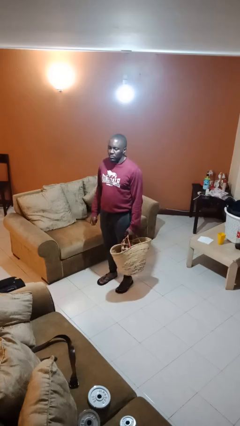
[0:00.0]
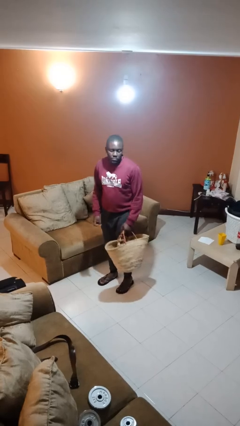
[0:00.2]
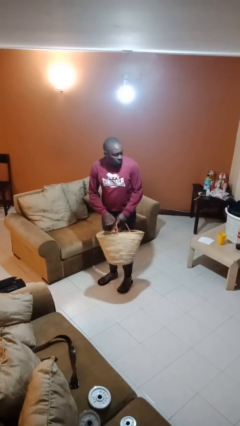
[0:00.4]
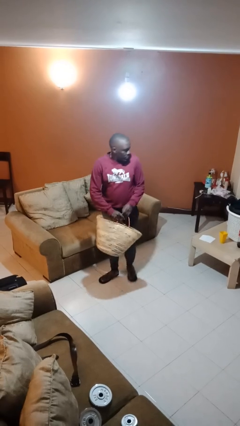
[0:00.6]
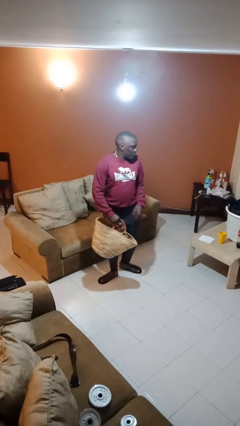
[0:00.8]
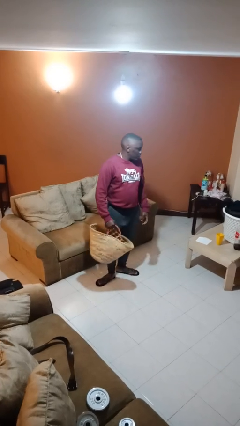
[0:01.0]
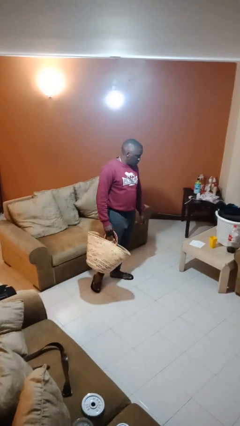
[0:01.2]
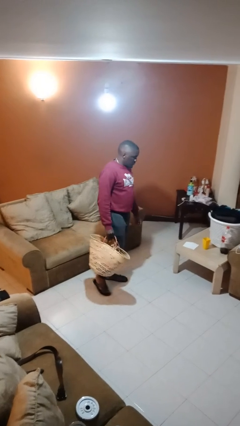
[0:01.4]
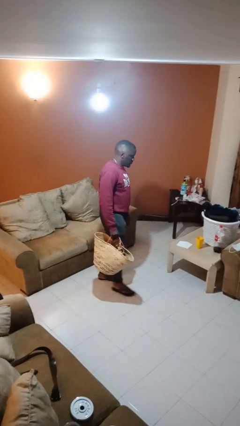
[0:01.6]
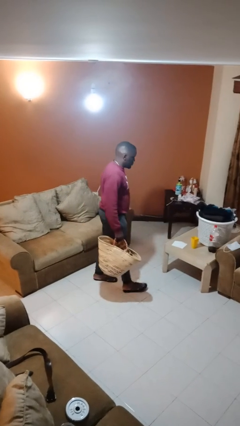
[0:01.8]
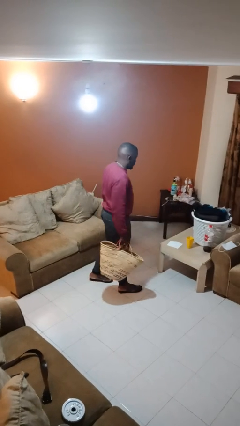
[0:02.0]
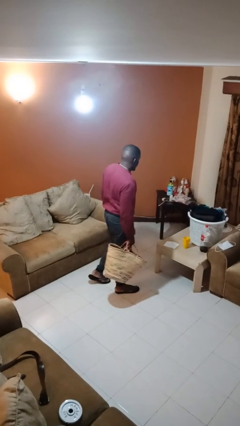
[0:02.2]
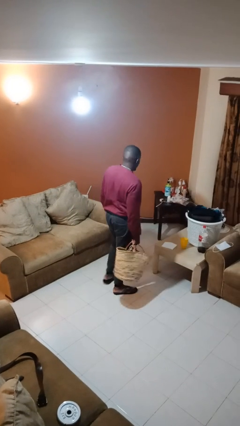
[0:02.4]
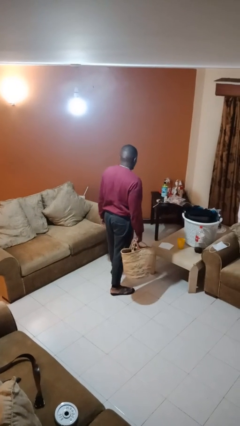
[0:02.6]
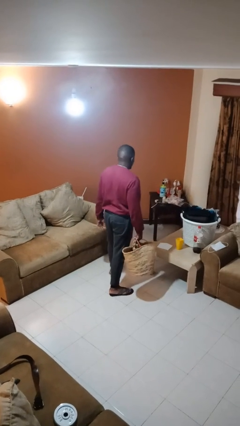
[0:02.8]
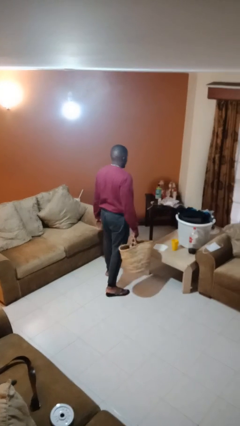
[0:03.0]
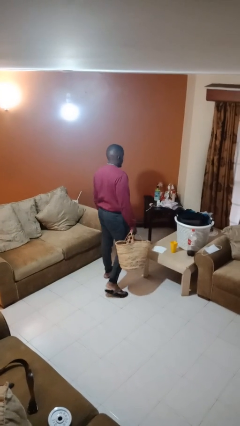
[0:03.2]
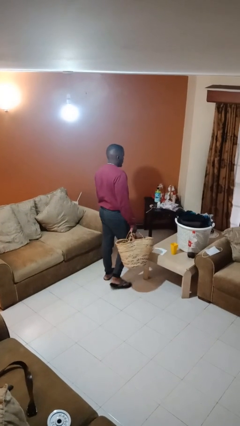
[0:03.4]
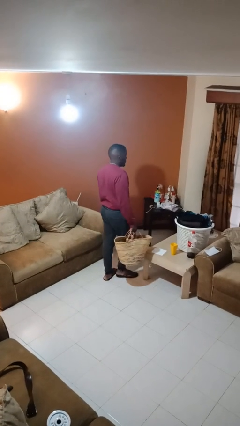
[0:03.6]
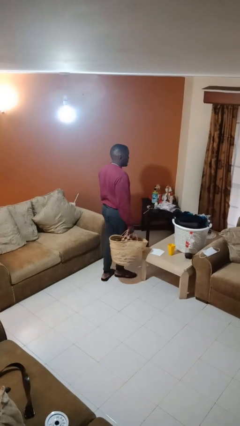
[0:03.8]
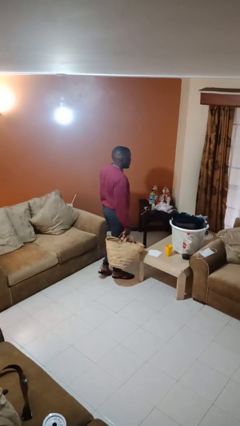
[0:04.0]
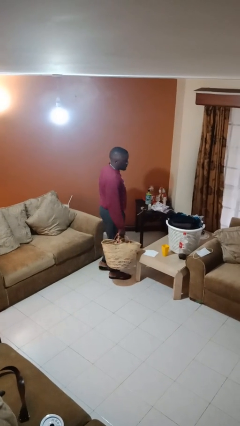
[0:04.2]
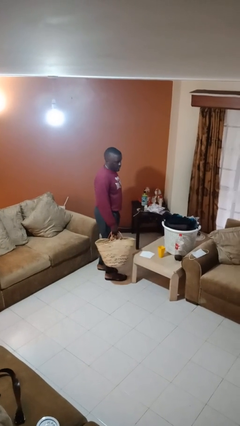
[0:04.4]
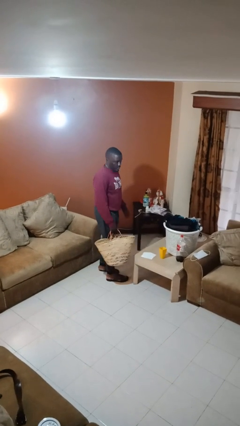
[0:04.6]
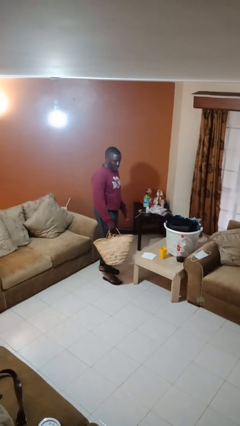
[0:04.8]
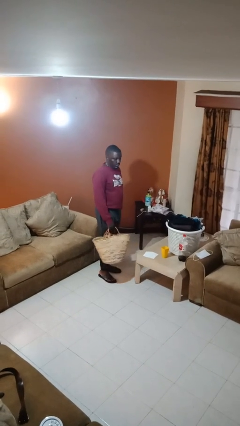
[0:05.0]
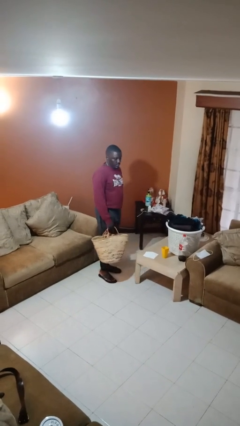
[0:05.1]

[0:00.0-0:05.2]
person carries groceries

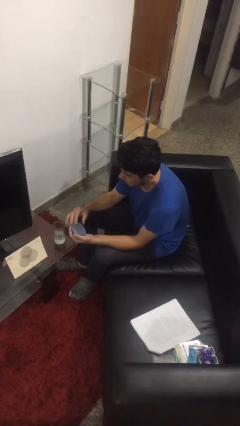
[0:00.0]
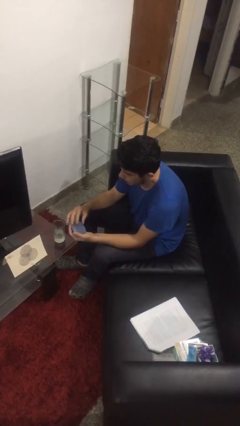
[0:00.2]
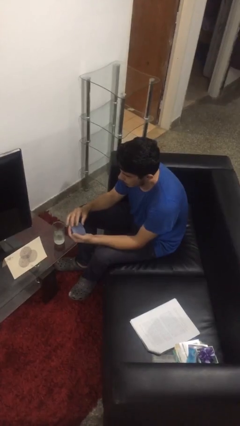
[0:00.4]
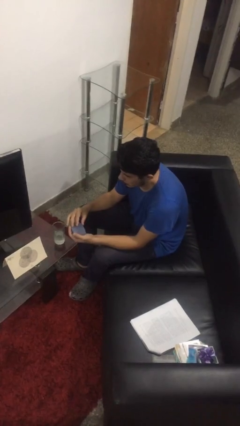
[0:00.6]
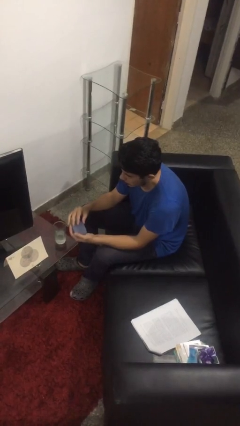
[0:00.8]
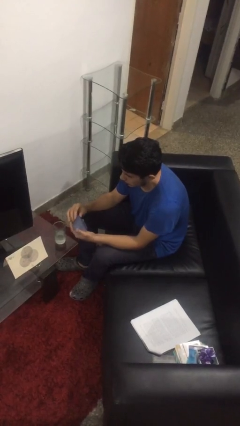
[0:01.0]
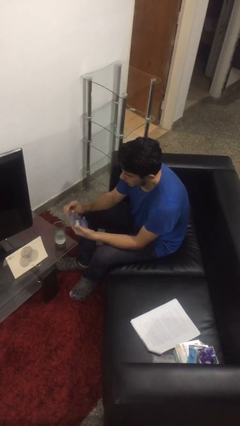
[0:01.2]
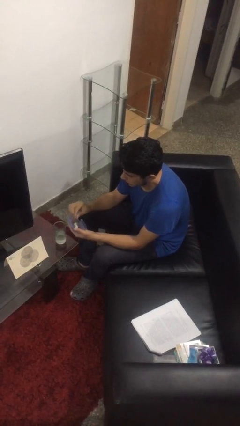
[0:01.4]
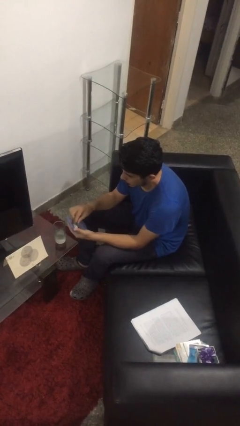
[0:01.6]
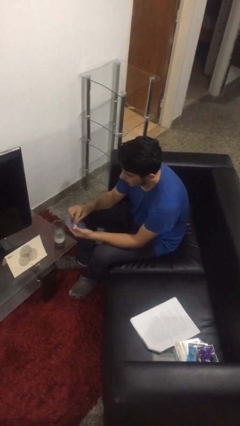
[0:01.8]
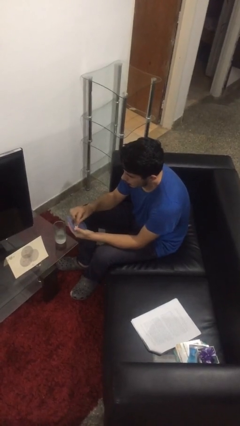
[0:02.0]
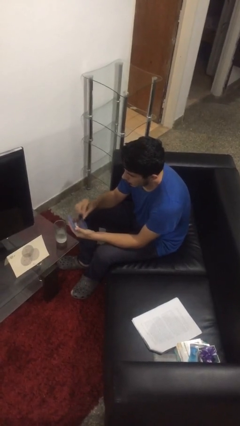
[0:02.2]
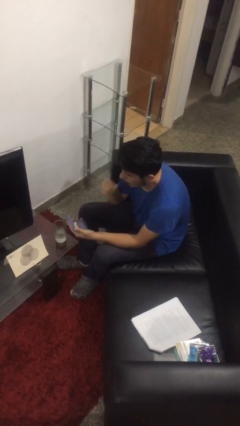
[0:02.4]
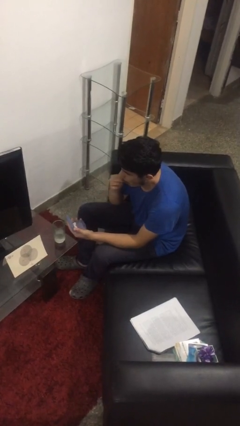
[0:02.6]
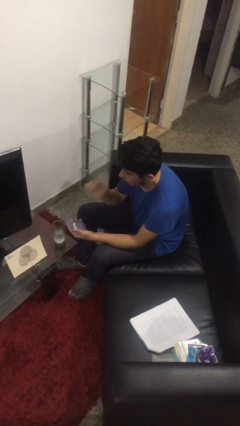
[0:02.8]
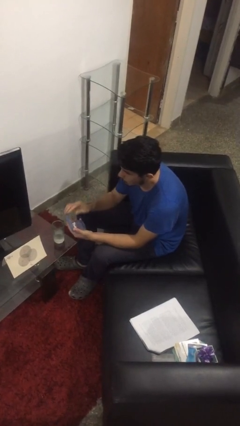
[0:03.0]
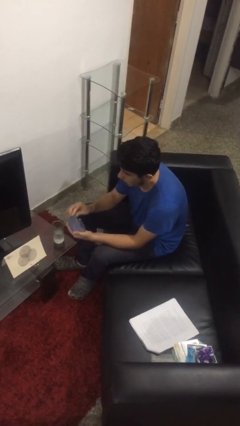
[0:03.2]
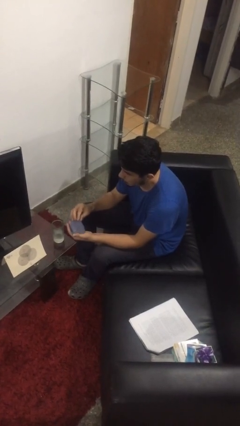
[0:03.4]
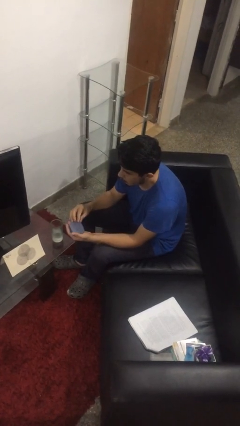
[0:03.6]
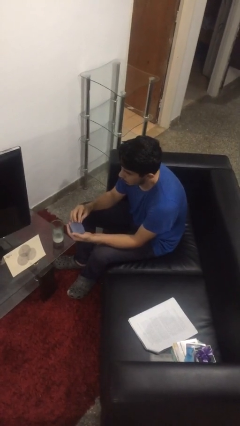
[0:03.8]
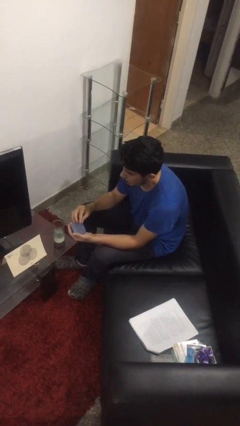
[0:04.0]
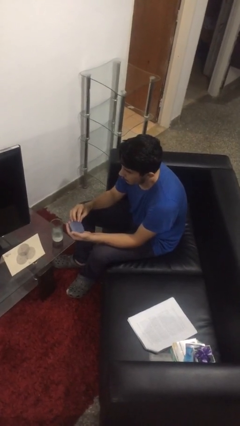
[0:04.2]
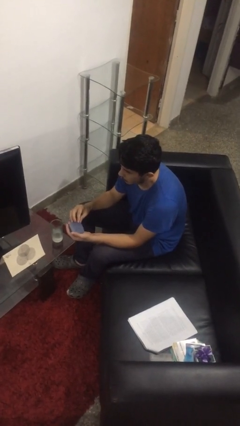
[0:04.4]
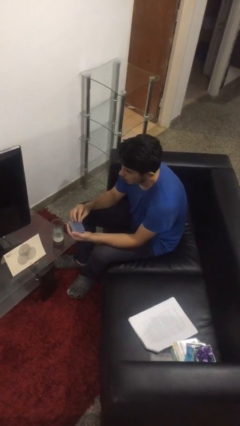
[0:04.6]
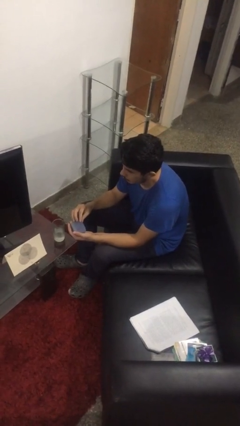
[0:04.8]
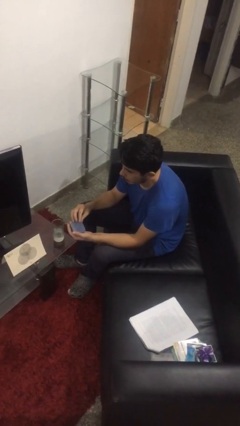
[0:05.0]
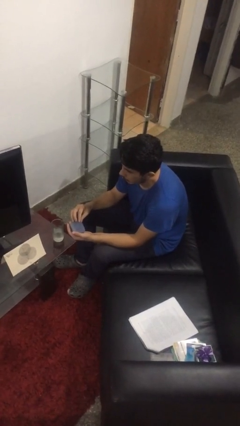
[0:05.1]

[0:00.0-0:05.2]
person takes medicine pills

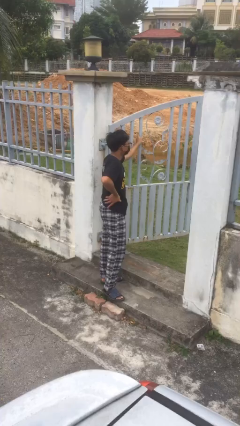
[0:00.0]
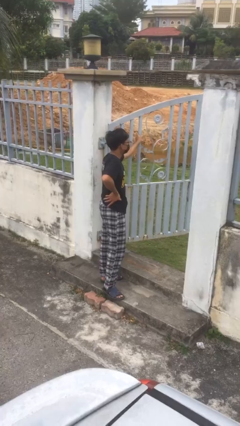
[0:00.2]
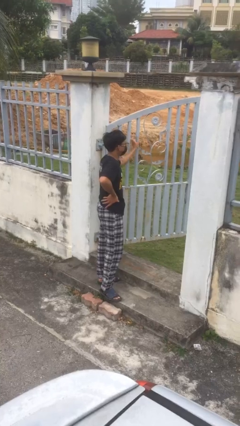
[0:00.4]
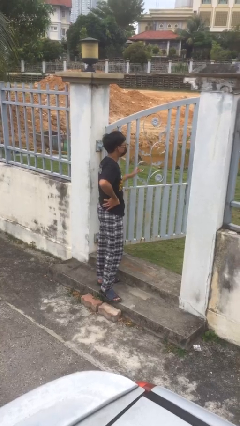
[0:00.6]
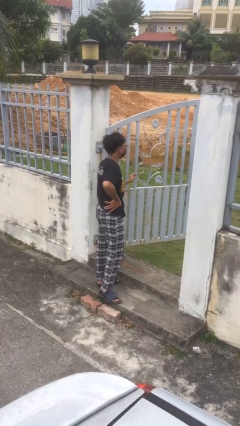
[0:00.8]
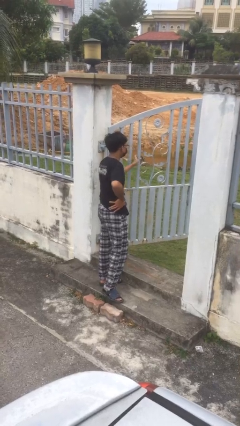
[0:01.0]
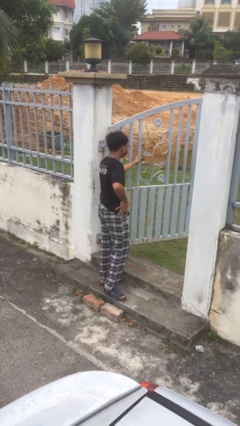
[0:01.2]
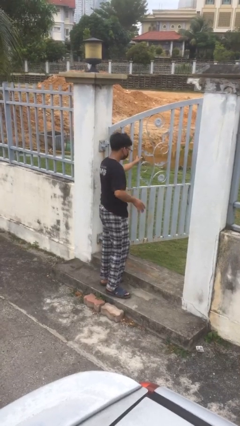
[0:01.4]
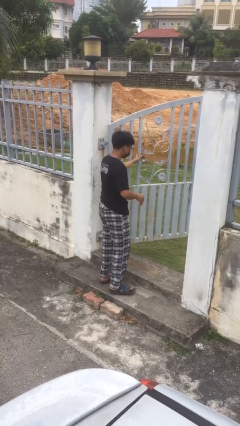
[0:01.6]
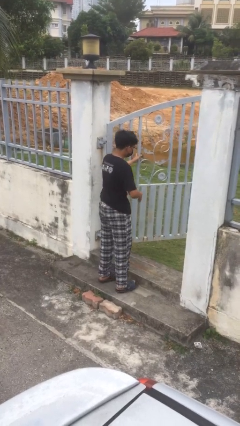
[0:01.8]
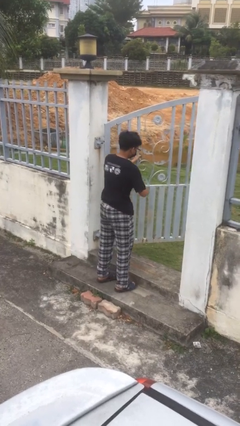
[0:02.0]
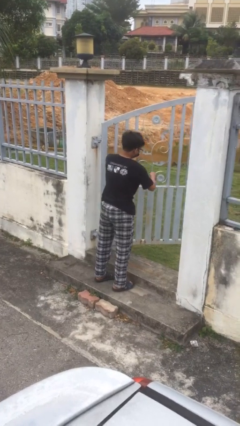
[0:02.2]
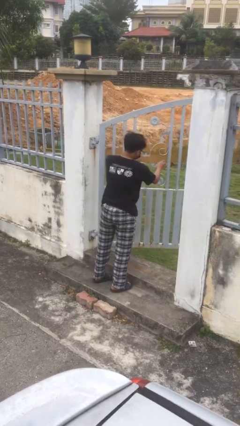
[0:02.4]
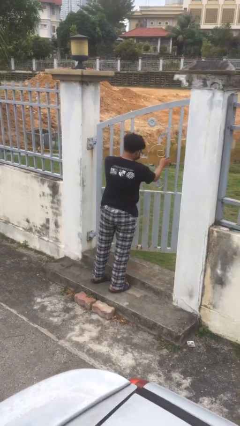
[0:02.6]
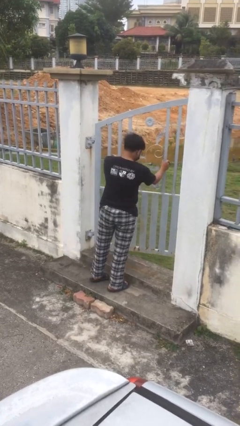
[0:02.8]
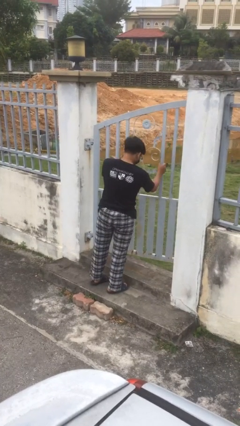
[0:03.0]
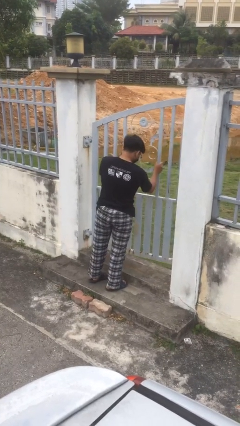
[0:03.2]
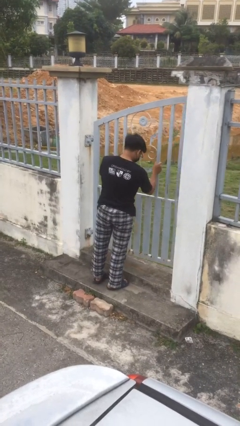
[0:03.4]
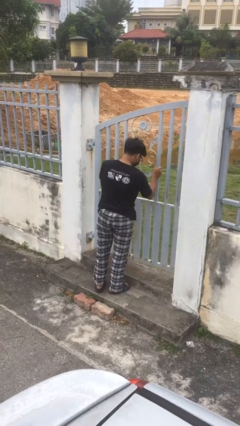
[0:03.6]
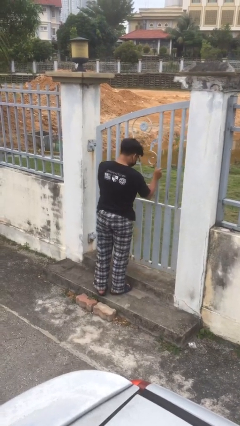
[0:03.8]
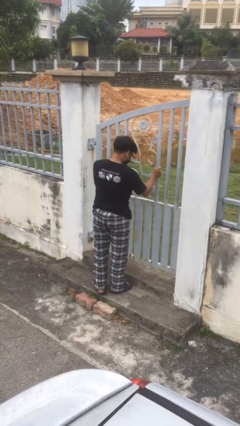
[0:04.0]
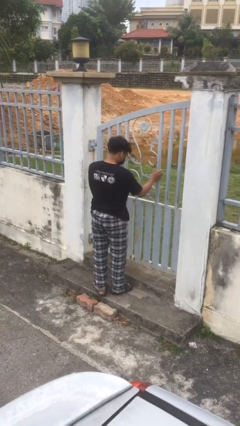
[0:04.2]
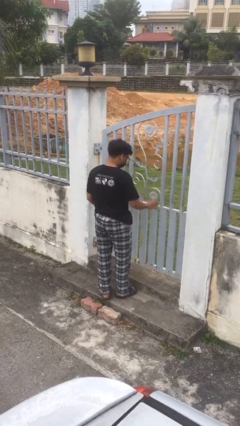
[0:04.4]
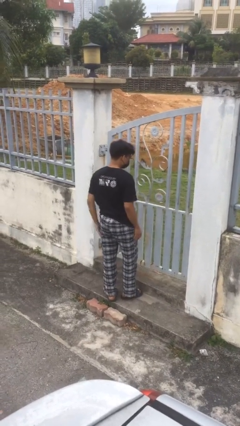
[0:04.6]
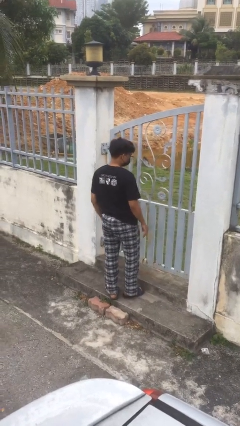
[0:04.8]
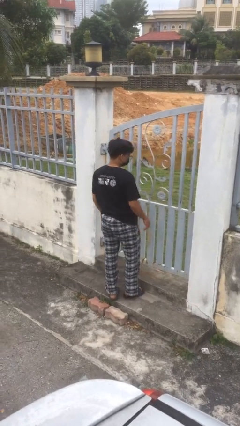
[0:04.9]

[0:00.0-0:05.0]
person closes facility door

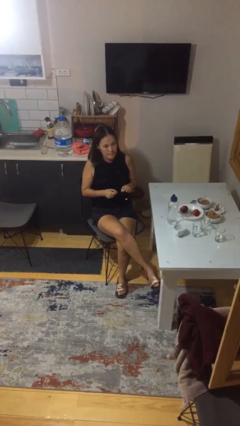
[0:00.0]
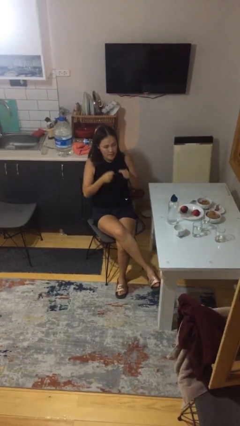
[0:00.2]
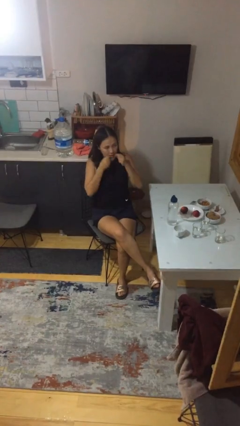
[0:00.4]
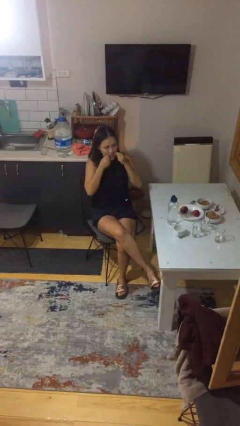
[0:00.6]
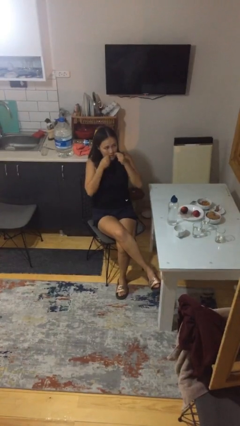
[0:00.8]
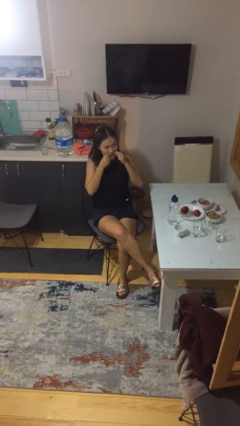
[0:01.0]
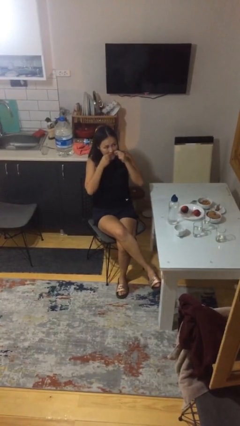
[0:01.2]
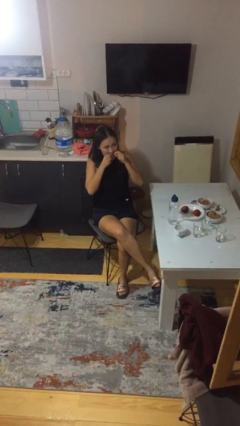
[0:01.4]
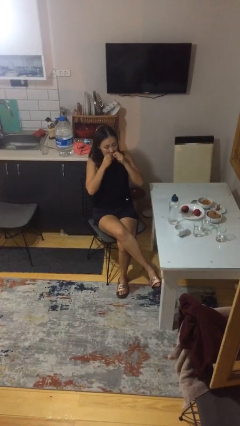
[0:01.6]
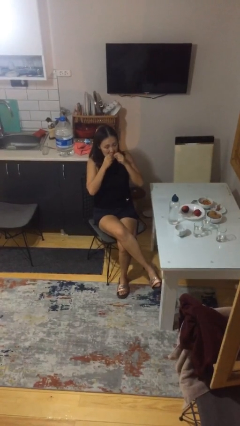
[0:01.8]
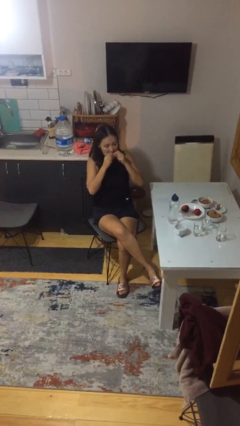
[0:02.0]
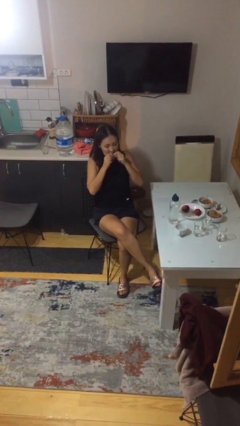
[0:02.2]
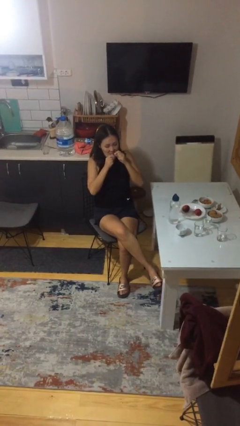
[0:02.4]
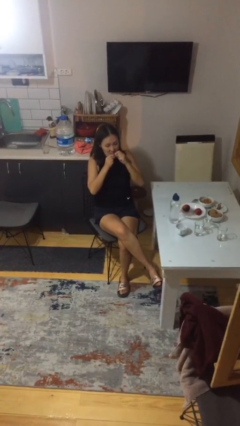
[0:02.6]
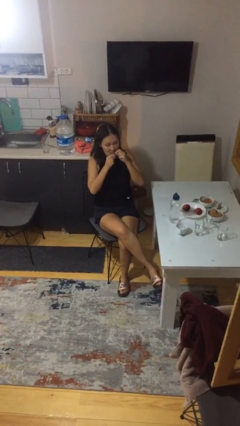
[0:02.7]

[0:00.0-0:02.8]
person flosses
